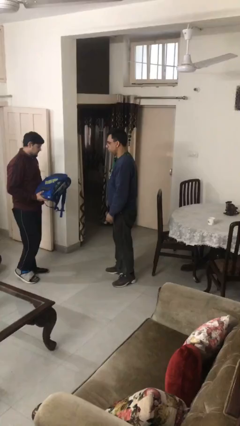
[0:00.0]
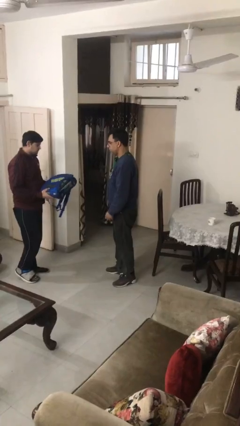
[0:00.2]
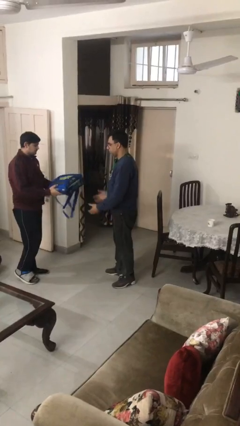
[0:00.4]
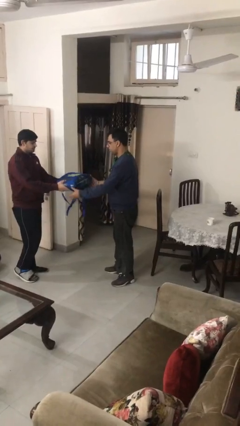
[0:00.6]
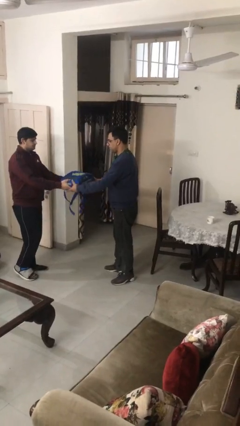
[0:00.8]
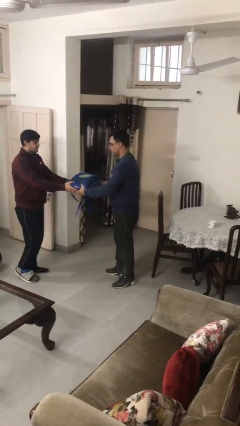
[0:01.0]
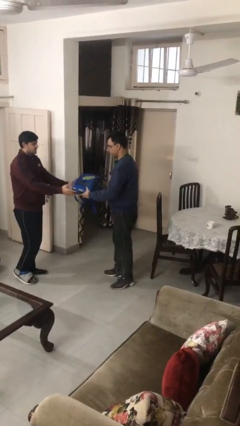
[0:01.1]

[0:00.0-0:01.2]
person transfers object to person

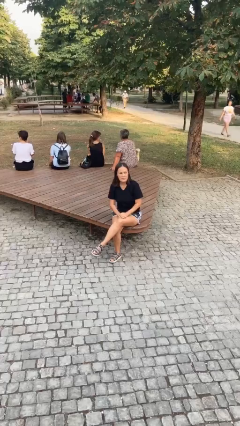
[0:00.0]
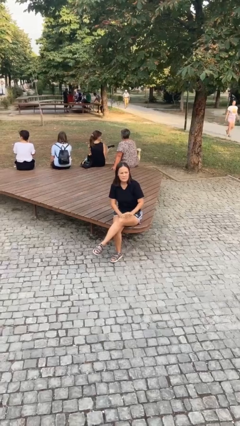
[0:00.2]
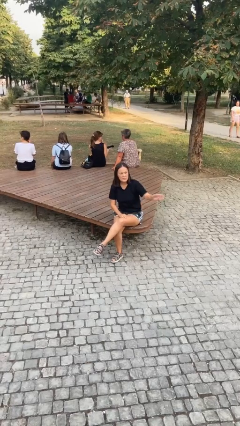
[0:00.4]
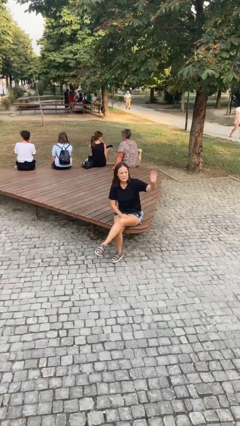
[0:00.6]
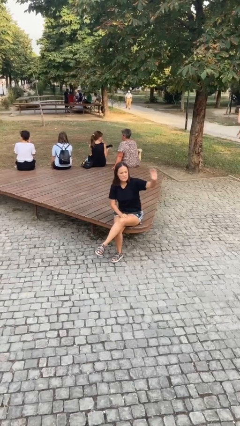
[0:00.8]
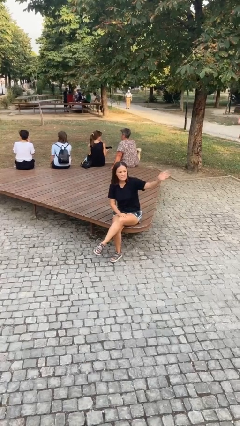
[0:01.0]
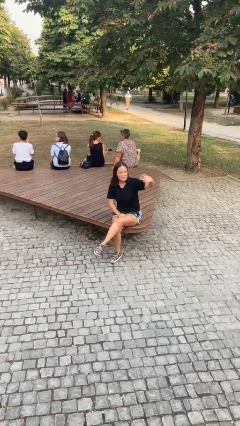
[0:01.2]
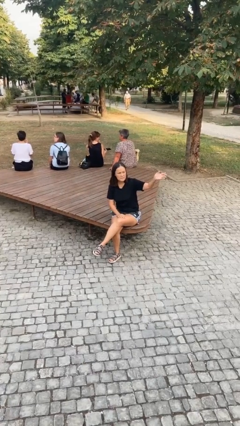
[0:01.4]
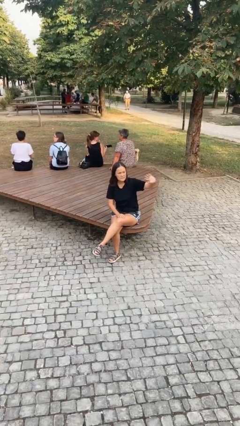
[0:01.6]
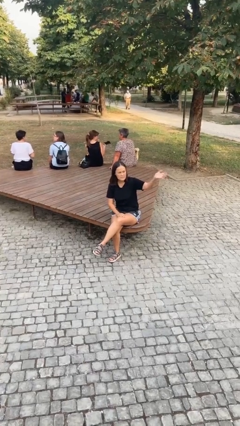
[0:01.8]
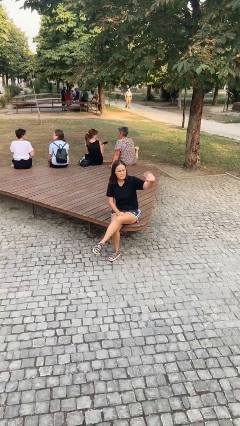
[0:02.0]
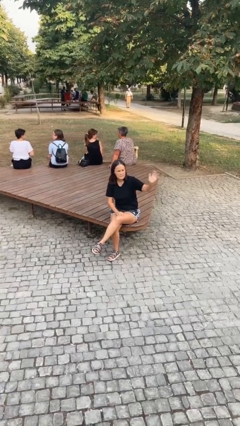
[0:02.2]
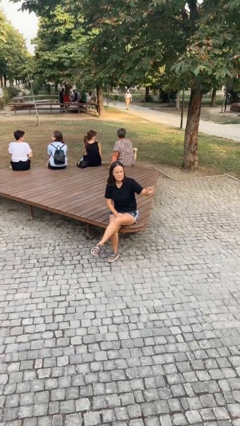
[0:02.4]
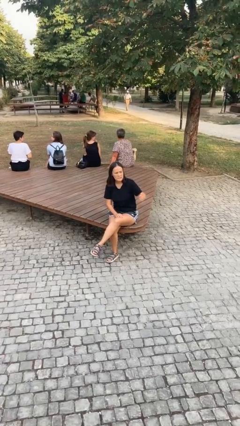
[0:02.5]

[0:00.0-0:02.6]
person waves at person

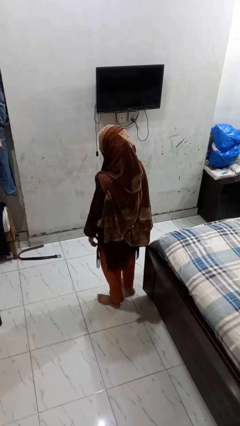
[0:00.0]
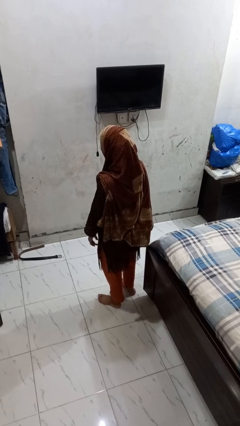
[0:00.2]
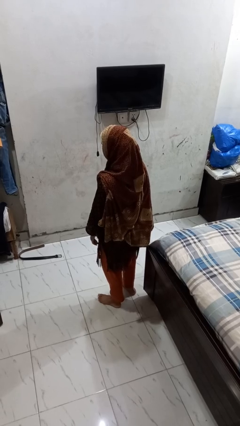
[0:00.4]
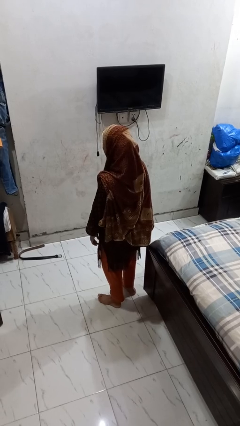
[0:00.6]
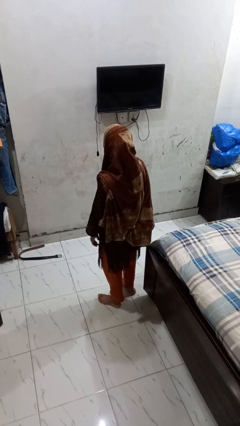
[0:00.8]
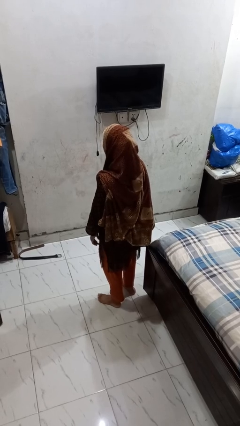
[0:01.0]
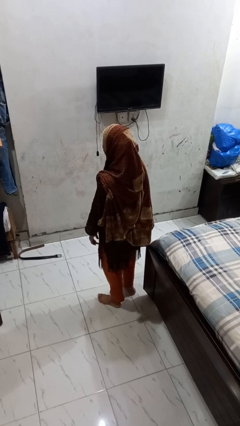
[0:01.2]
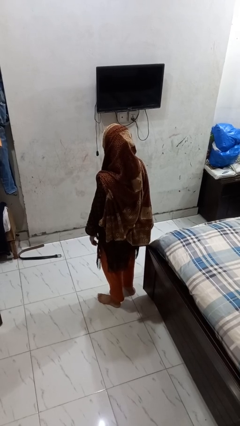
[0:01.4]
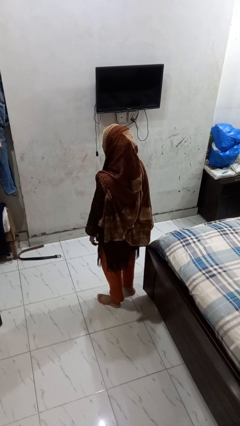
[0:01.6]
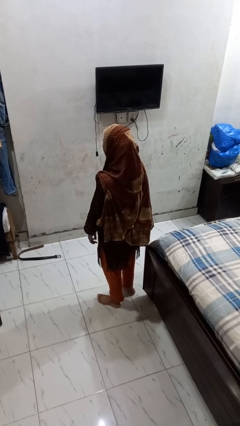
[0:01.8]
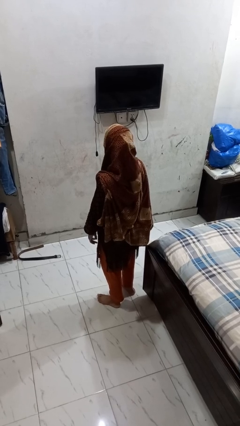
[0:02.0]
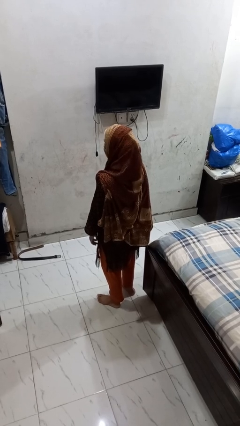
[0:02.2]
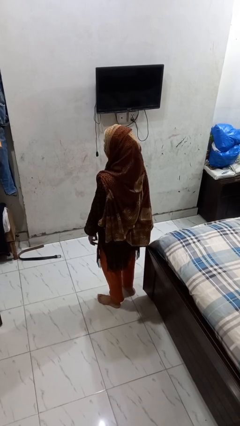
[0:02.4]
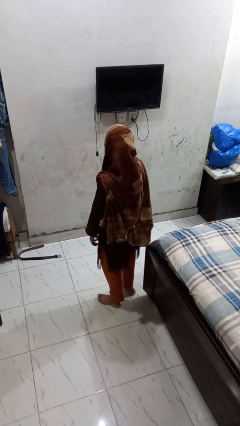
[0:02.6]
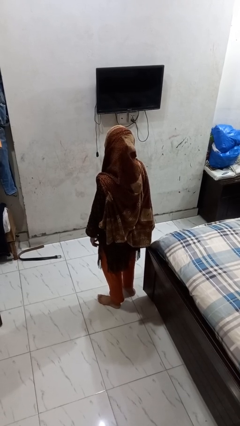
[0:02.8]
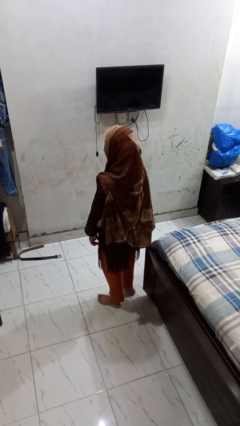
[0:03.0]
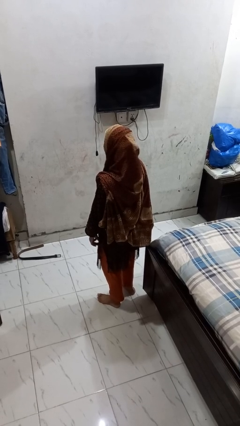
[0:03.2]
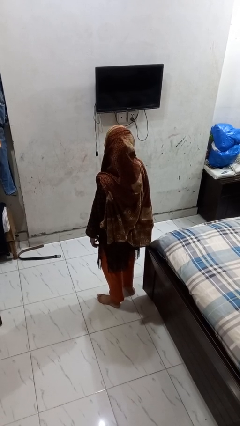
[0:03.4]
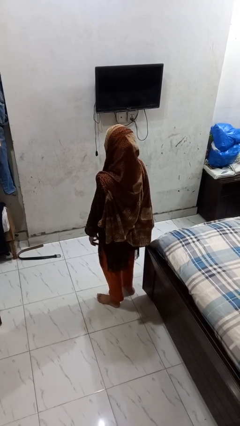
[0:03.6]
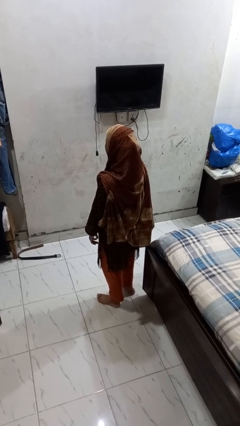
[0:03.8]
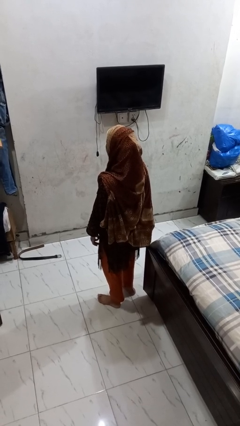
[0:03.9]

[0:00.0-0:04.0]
person shakes head

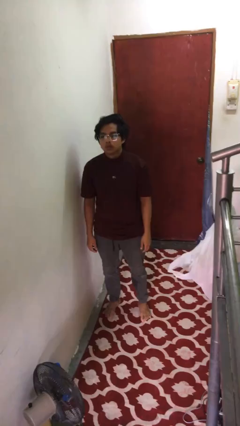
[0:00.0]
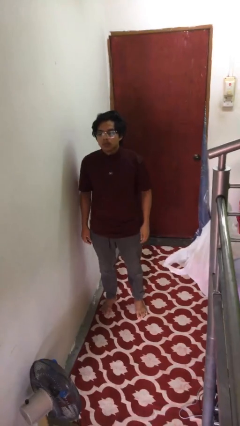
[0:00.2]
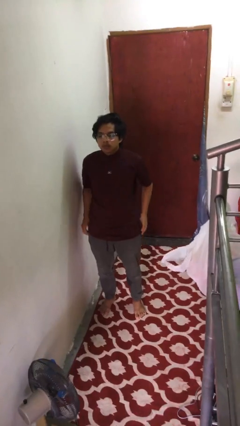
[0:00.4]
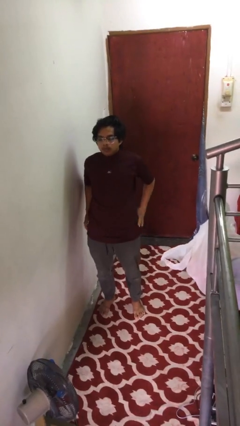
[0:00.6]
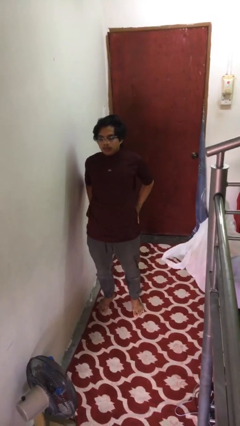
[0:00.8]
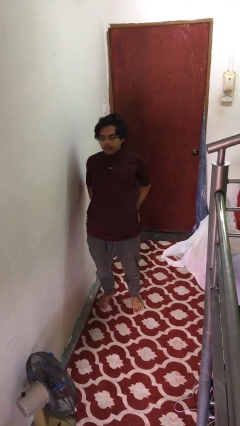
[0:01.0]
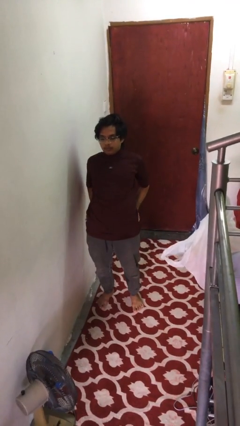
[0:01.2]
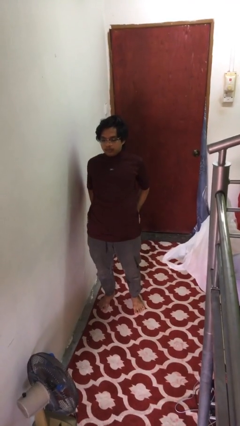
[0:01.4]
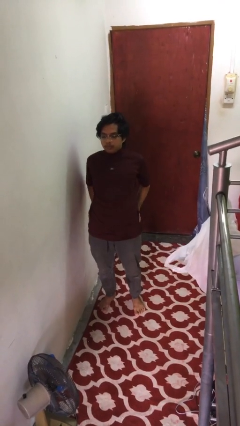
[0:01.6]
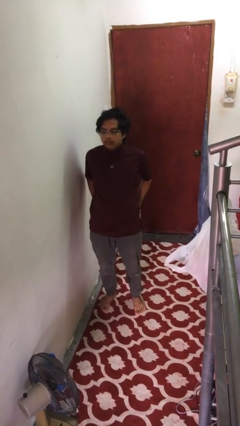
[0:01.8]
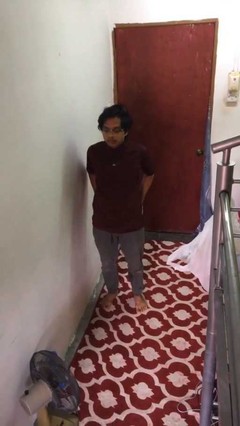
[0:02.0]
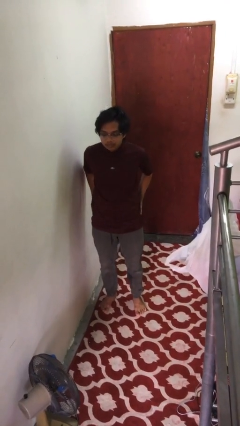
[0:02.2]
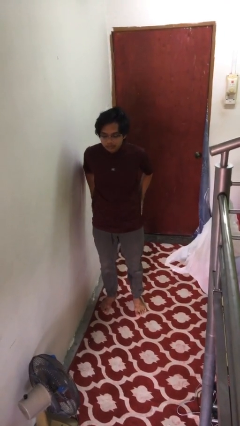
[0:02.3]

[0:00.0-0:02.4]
person stretches back

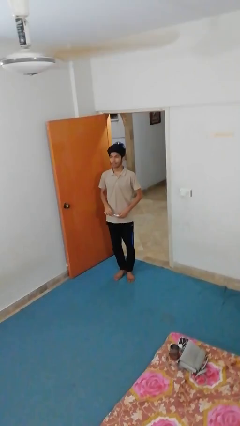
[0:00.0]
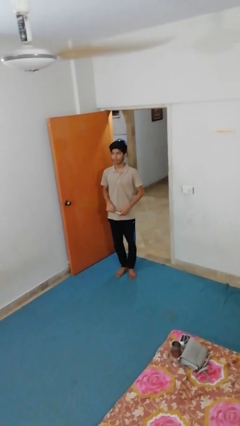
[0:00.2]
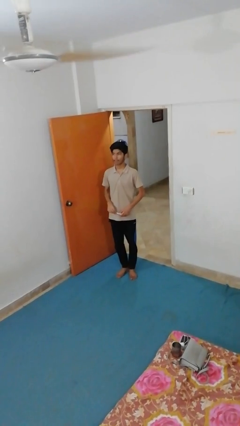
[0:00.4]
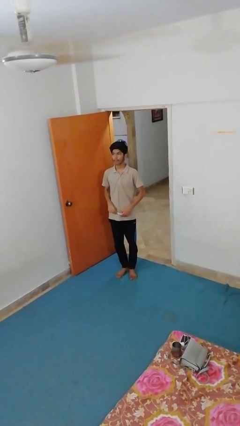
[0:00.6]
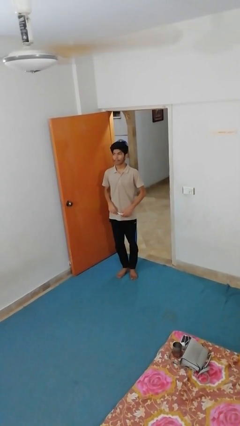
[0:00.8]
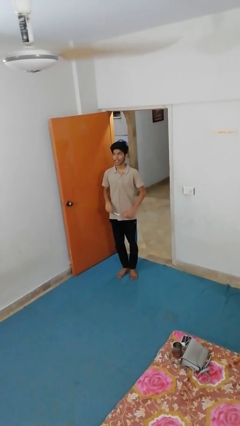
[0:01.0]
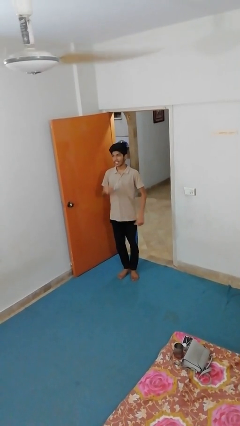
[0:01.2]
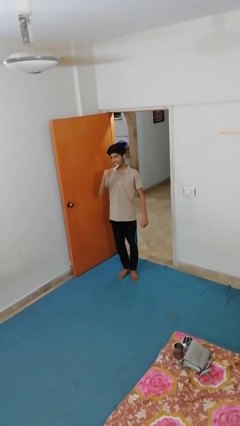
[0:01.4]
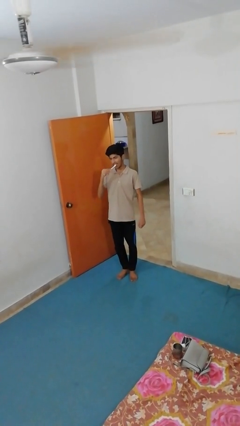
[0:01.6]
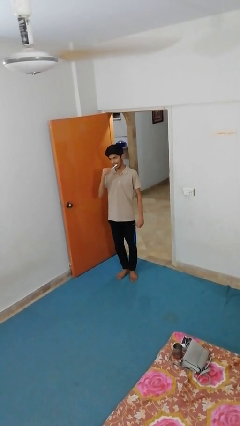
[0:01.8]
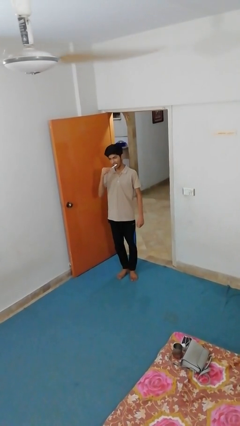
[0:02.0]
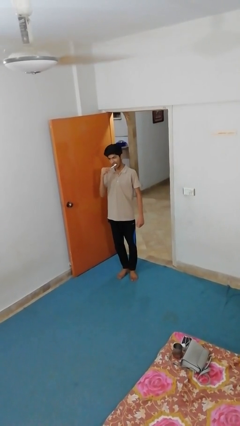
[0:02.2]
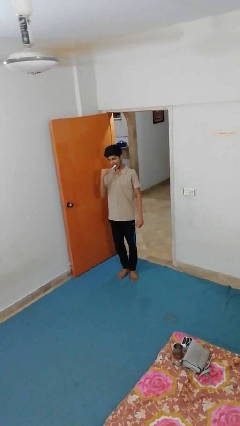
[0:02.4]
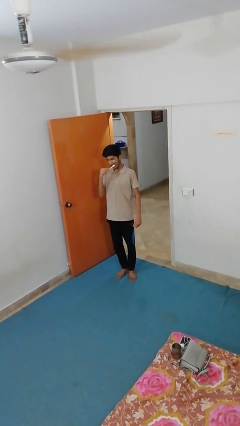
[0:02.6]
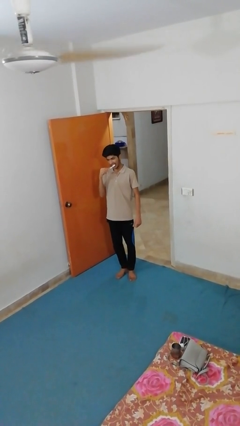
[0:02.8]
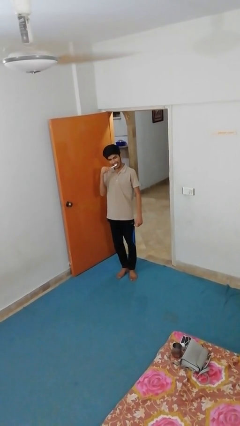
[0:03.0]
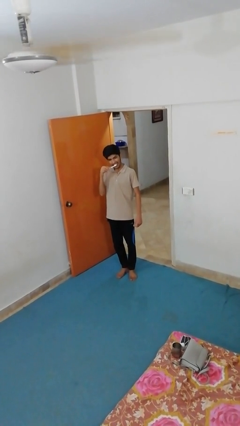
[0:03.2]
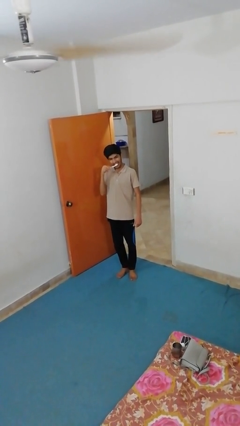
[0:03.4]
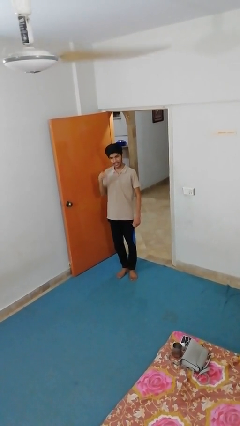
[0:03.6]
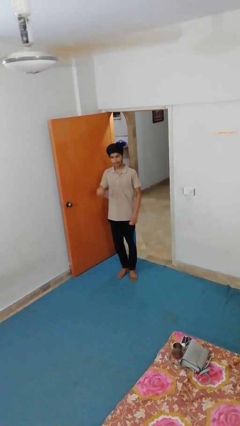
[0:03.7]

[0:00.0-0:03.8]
person brushes teeth

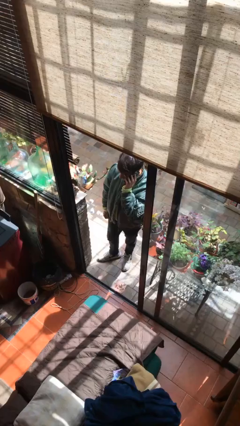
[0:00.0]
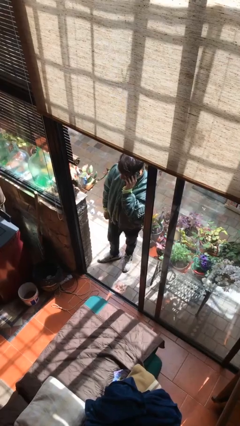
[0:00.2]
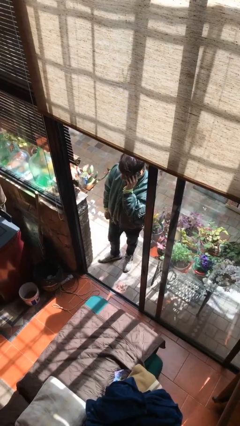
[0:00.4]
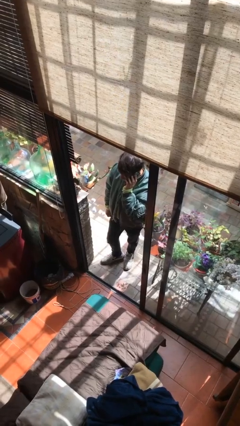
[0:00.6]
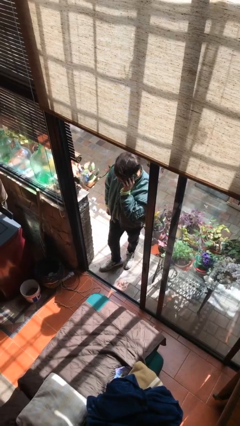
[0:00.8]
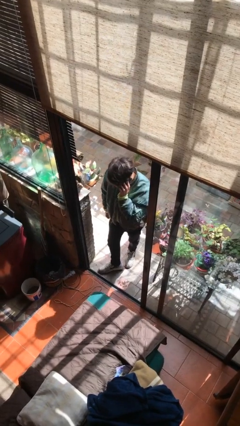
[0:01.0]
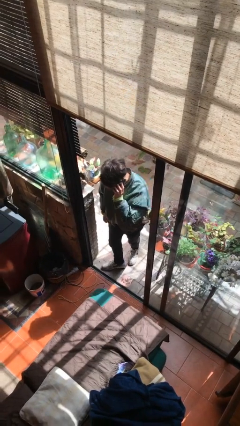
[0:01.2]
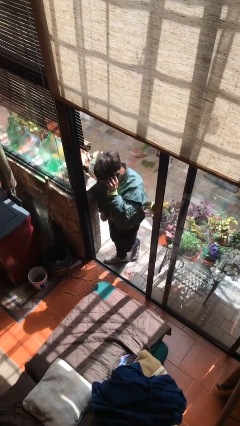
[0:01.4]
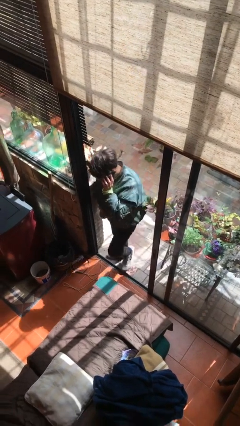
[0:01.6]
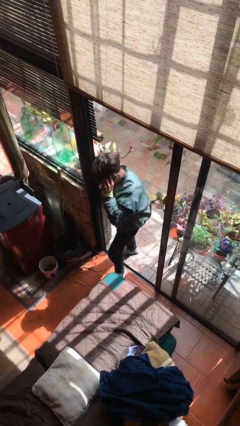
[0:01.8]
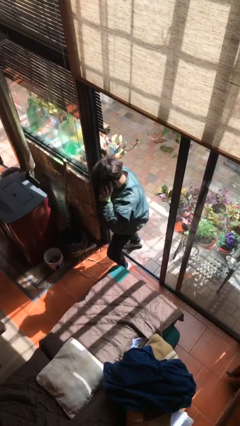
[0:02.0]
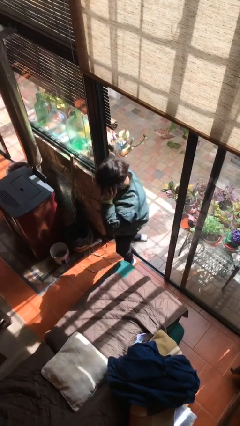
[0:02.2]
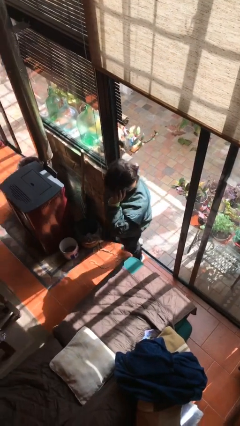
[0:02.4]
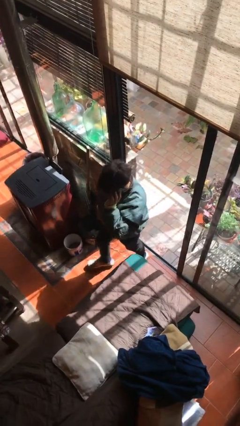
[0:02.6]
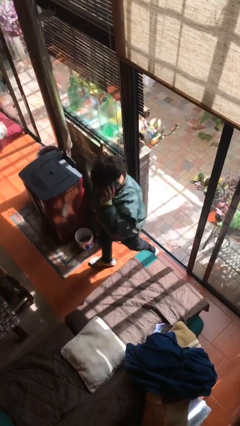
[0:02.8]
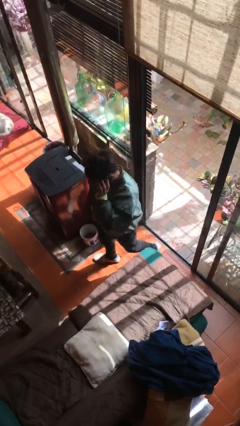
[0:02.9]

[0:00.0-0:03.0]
person enters scene through structure

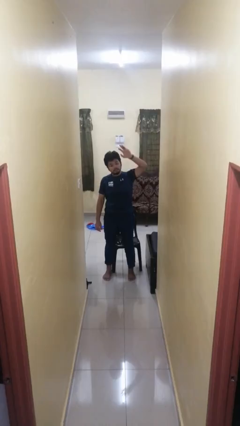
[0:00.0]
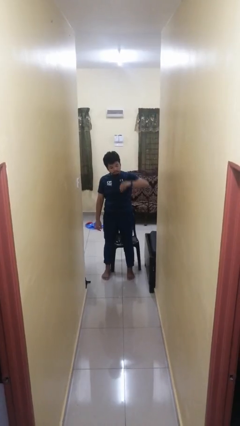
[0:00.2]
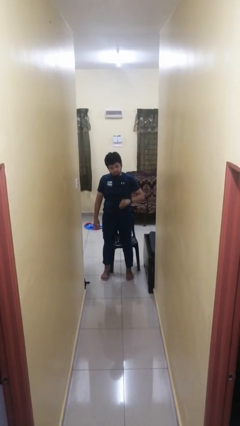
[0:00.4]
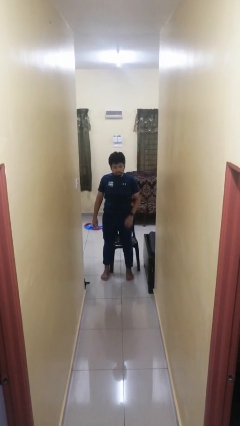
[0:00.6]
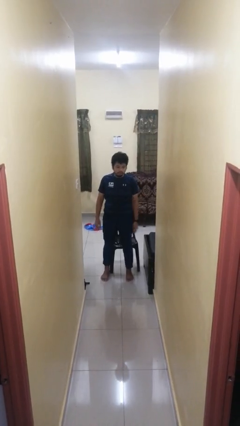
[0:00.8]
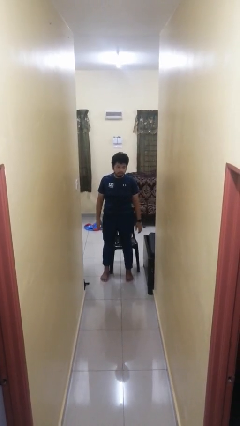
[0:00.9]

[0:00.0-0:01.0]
person gestures swipe down
